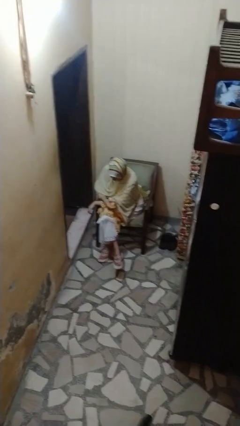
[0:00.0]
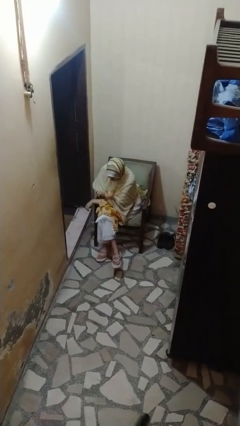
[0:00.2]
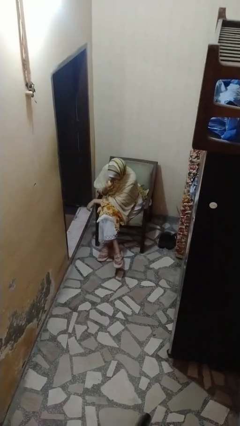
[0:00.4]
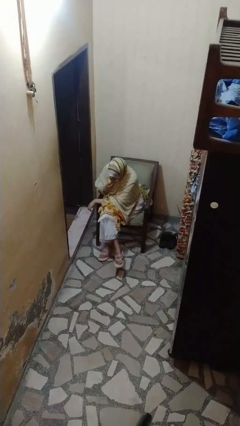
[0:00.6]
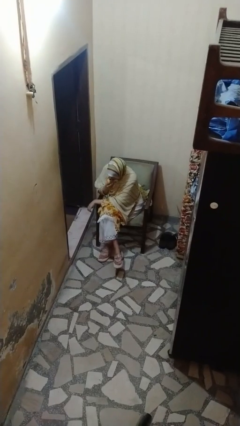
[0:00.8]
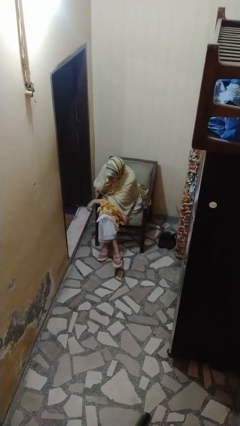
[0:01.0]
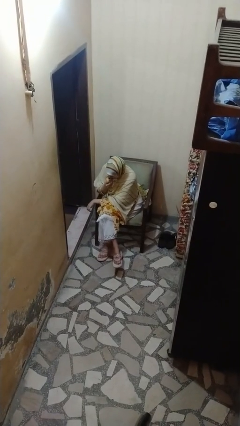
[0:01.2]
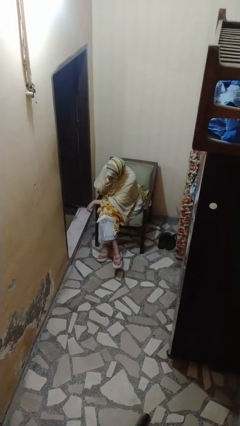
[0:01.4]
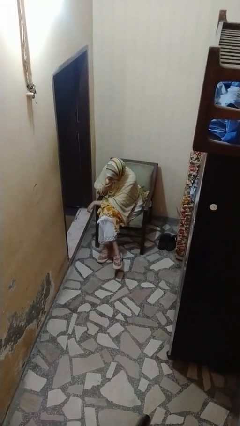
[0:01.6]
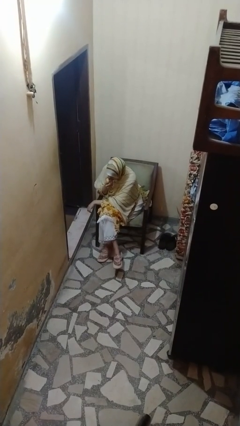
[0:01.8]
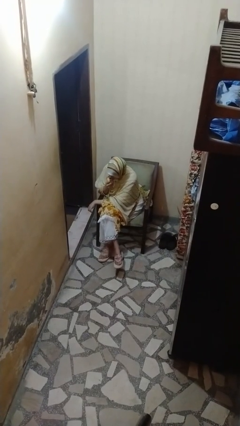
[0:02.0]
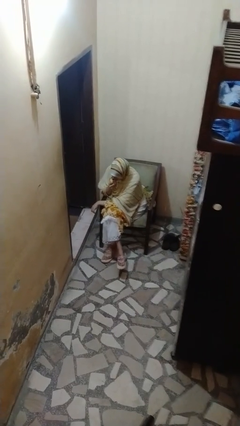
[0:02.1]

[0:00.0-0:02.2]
person eats apple

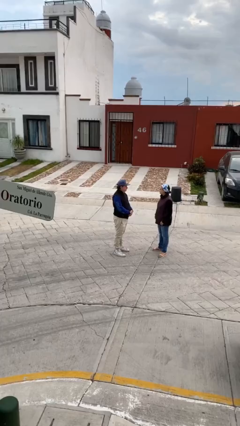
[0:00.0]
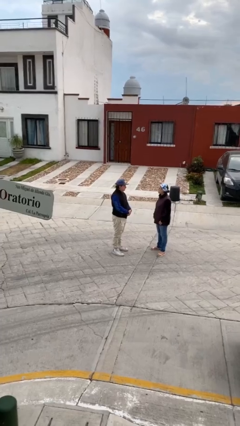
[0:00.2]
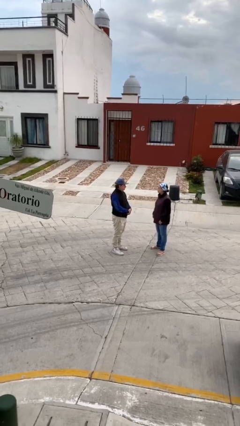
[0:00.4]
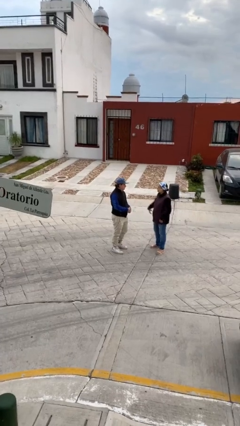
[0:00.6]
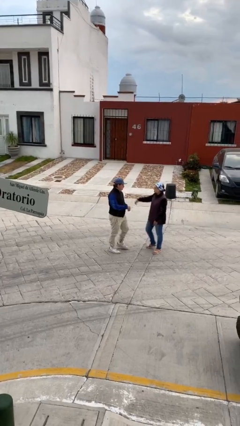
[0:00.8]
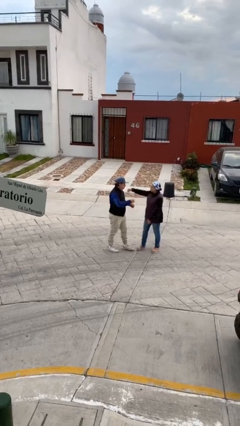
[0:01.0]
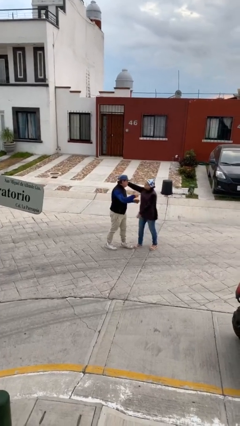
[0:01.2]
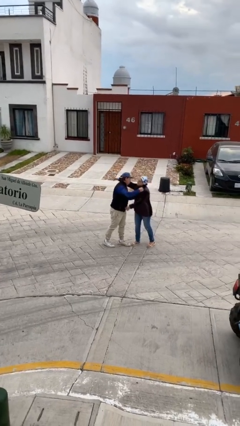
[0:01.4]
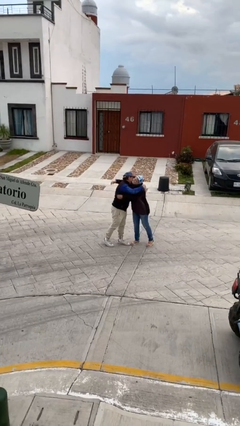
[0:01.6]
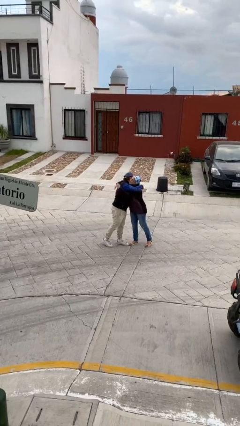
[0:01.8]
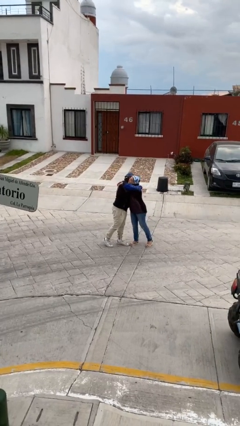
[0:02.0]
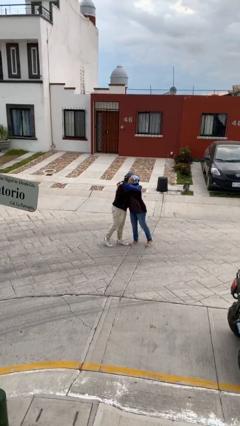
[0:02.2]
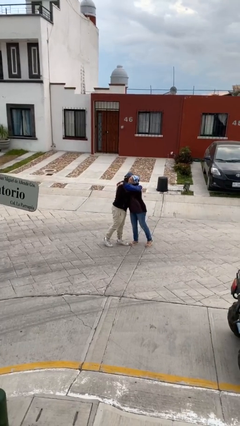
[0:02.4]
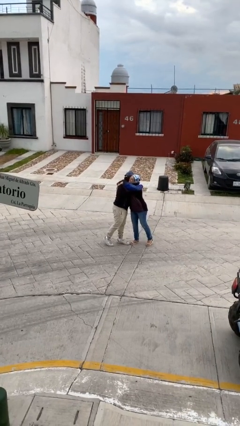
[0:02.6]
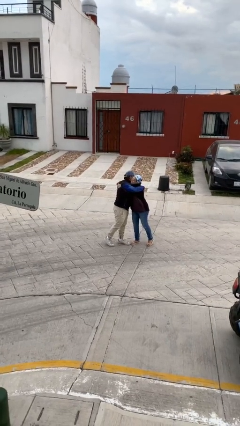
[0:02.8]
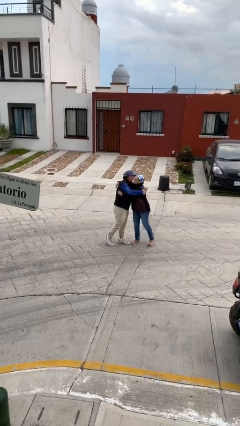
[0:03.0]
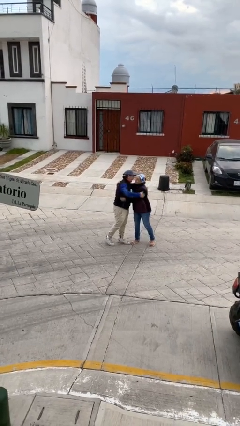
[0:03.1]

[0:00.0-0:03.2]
person embraces person

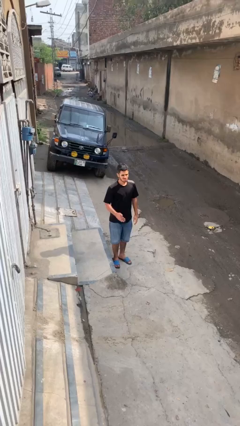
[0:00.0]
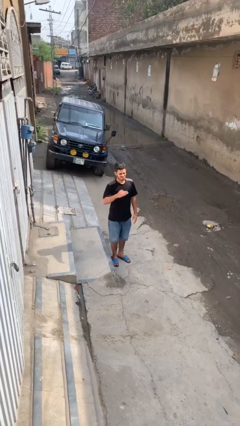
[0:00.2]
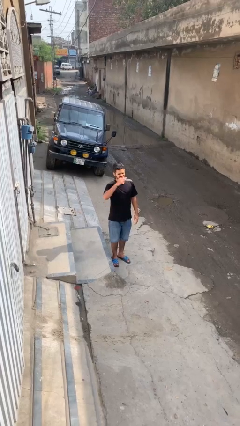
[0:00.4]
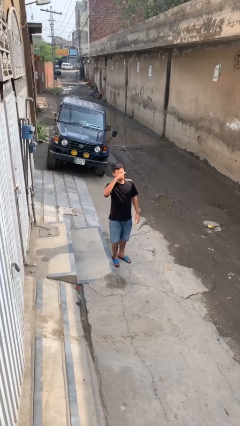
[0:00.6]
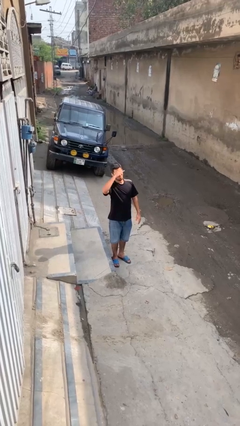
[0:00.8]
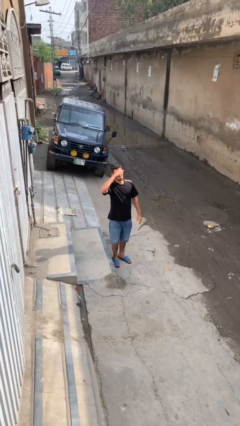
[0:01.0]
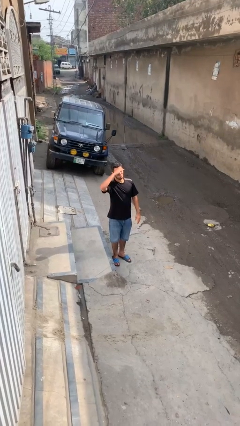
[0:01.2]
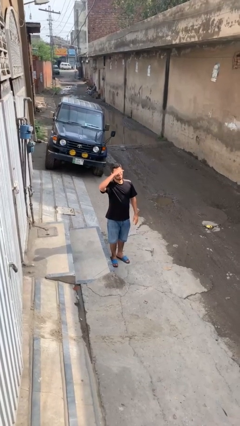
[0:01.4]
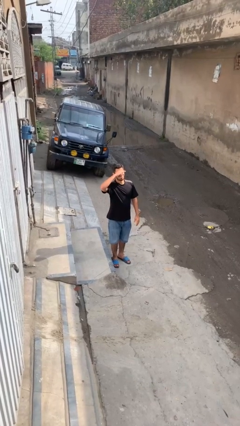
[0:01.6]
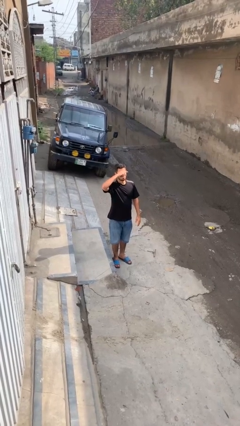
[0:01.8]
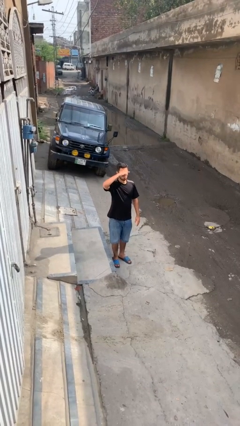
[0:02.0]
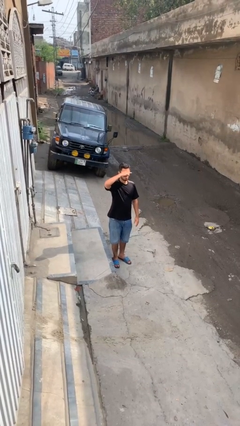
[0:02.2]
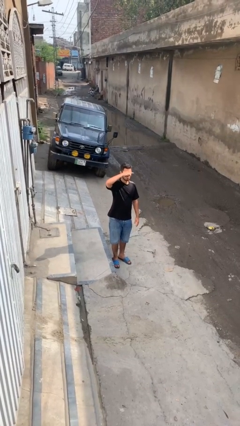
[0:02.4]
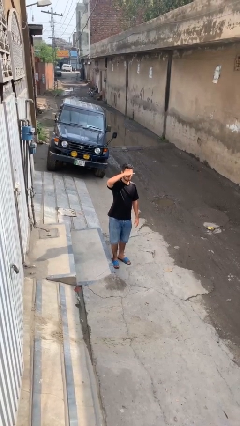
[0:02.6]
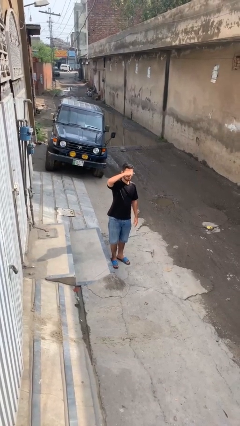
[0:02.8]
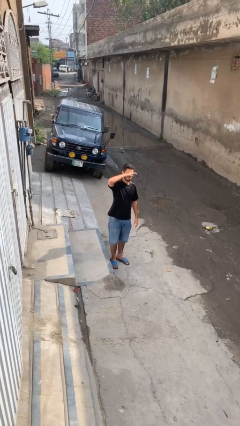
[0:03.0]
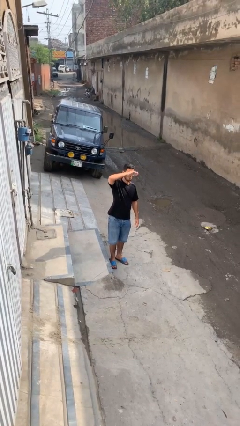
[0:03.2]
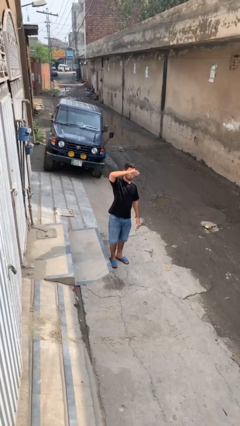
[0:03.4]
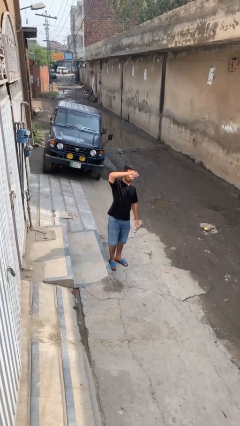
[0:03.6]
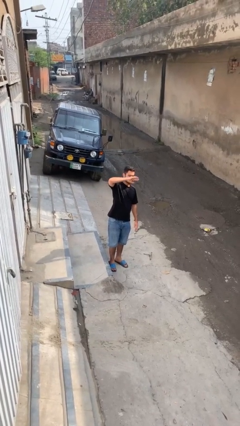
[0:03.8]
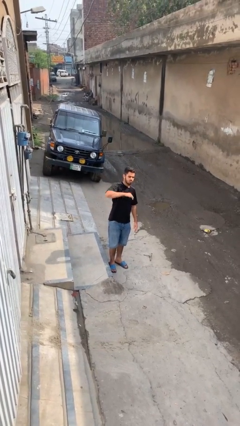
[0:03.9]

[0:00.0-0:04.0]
person shades eyes

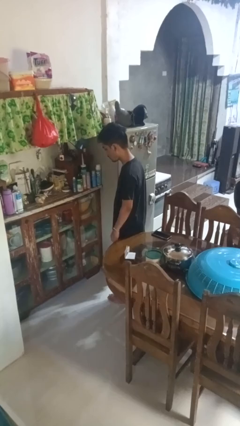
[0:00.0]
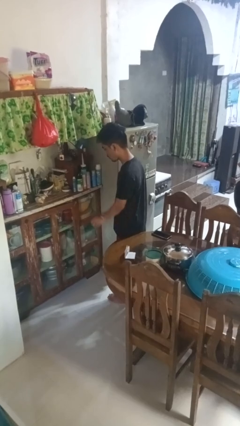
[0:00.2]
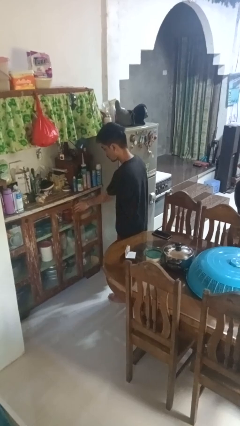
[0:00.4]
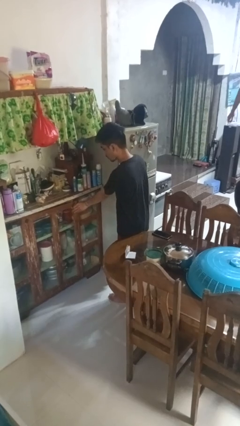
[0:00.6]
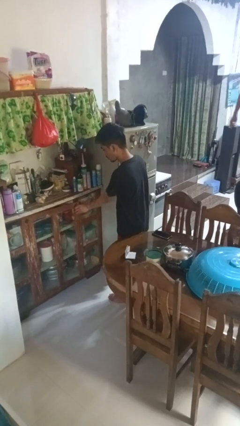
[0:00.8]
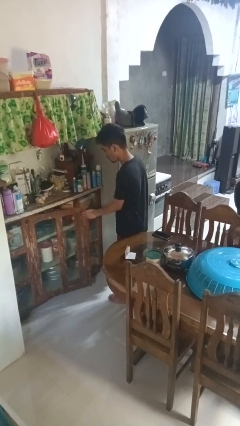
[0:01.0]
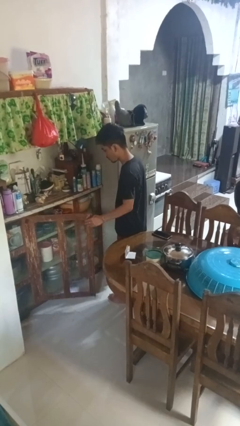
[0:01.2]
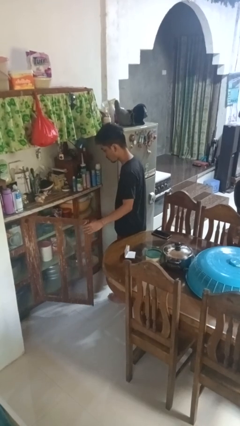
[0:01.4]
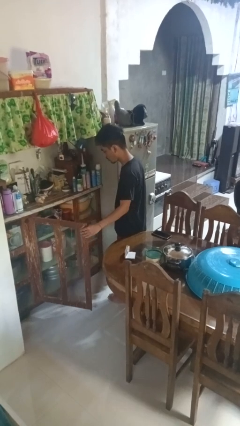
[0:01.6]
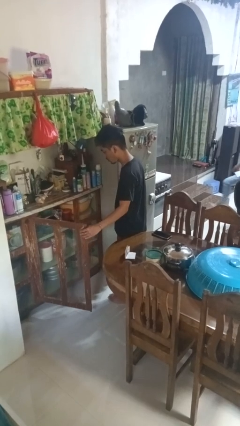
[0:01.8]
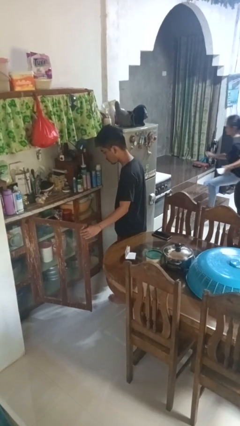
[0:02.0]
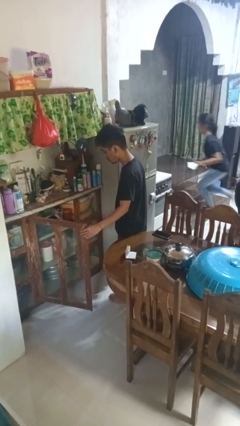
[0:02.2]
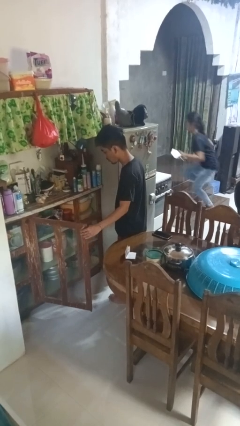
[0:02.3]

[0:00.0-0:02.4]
person opens cabinet

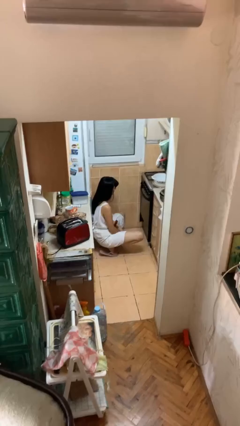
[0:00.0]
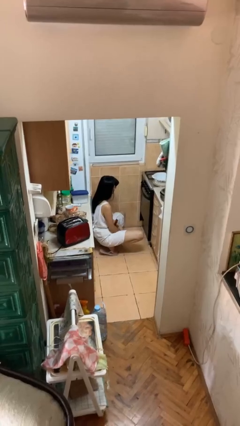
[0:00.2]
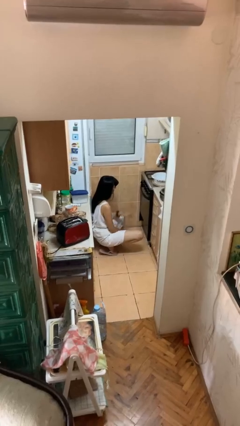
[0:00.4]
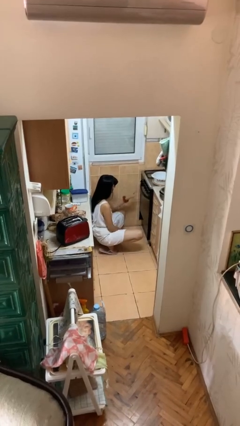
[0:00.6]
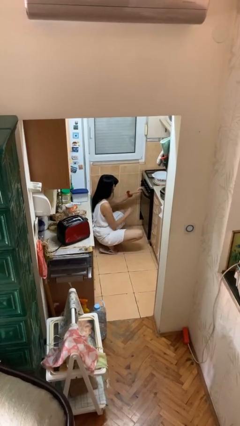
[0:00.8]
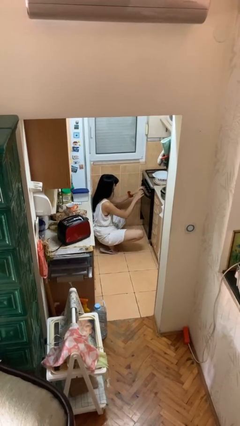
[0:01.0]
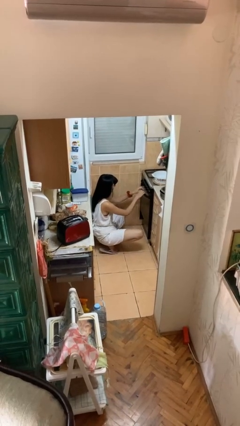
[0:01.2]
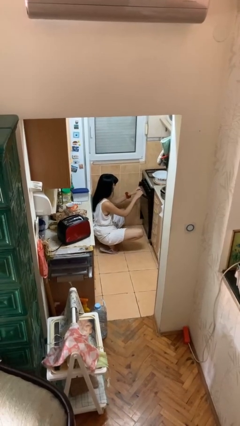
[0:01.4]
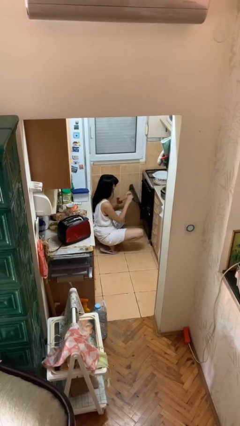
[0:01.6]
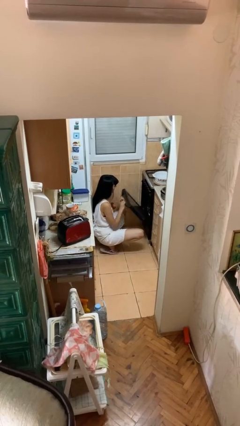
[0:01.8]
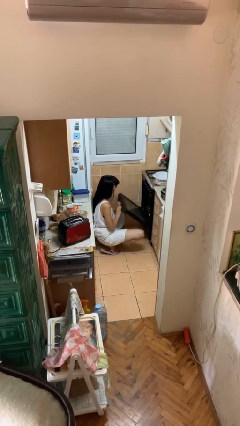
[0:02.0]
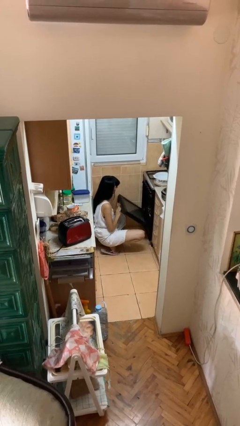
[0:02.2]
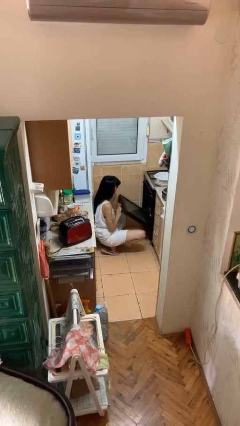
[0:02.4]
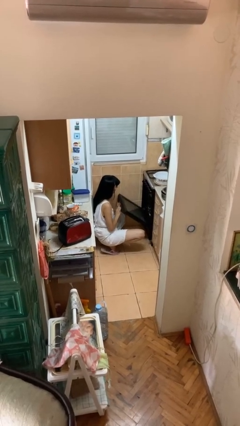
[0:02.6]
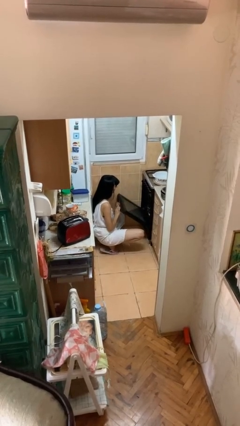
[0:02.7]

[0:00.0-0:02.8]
person opens oven door

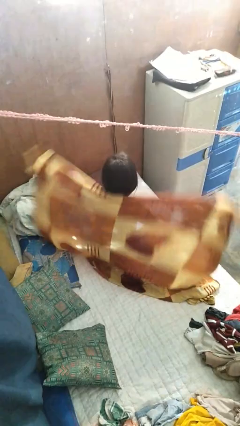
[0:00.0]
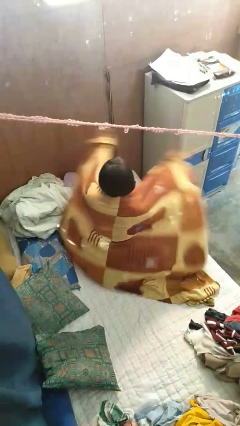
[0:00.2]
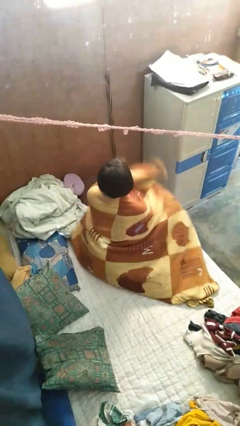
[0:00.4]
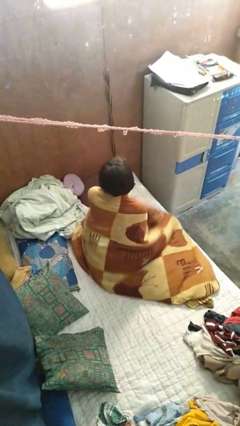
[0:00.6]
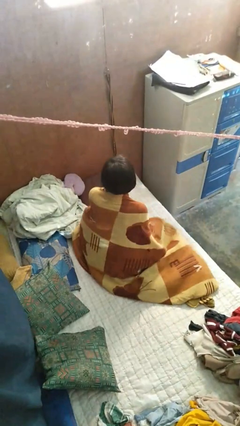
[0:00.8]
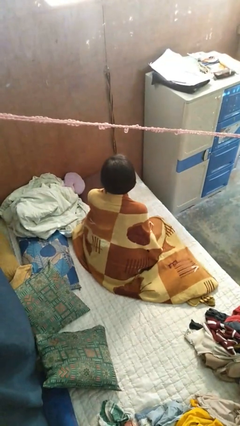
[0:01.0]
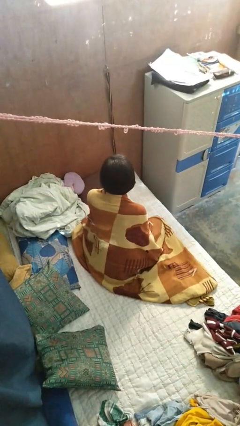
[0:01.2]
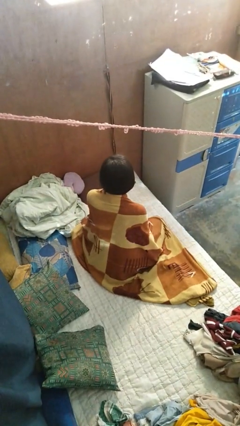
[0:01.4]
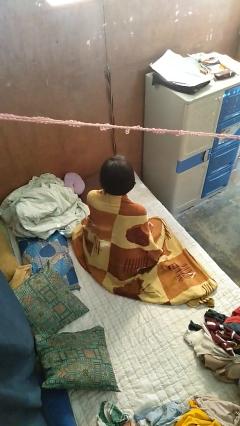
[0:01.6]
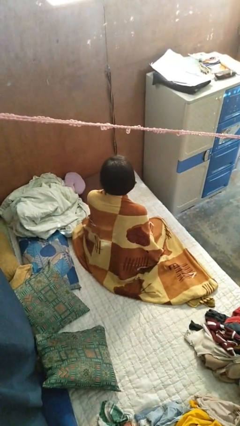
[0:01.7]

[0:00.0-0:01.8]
person covers with blanket

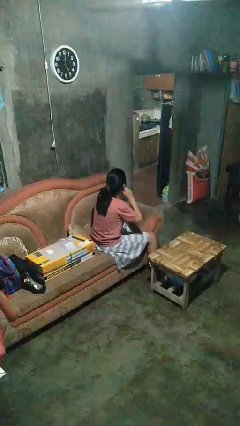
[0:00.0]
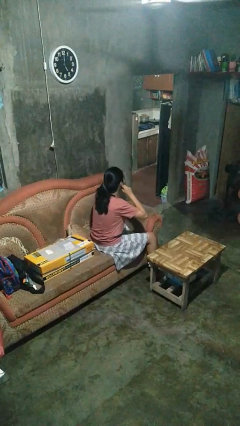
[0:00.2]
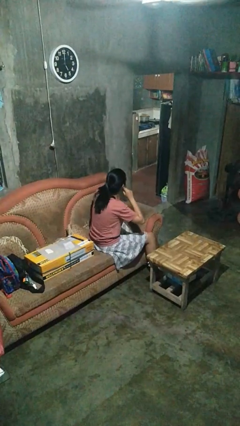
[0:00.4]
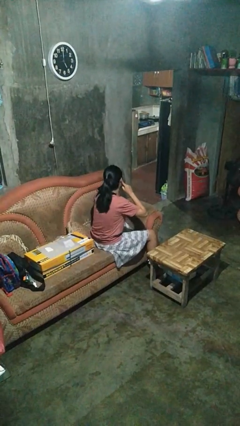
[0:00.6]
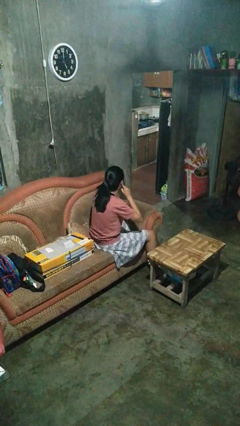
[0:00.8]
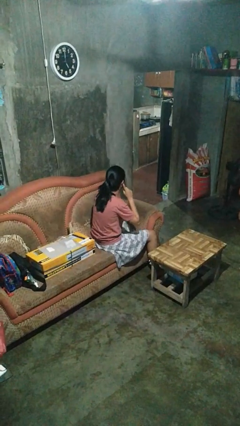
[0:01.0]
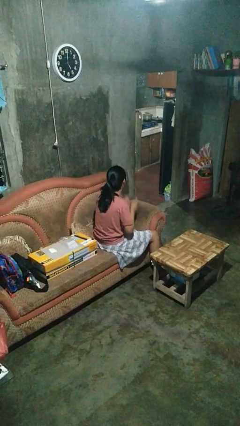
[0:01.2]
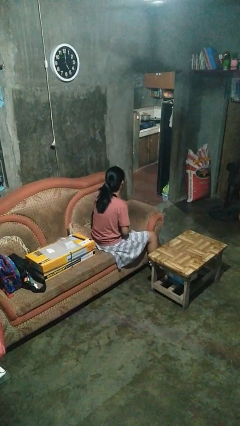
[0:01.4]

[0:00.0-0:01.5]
person puts fingers in ear
